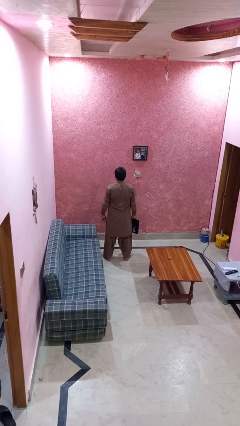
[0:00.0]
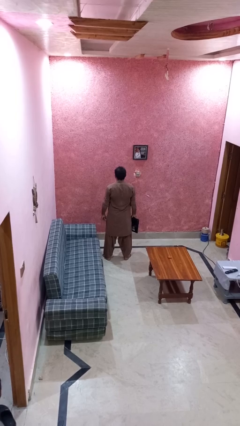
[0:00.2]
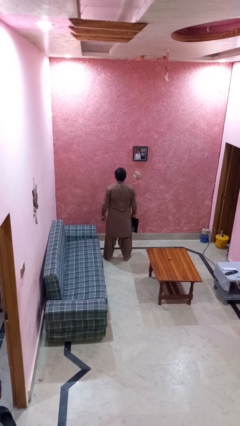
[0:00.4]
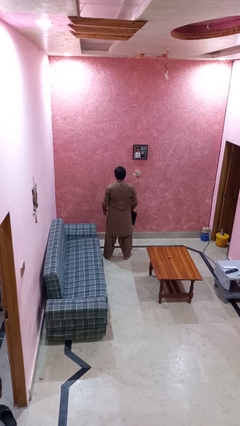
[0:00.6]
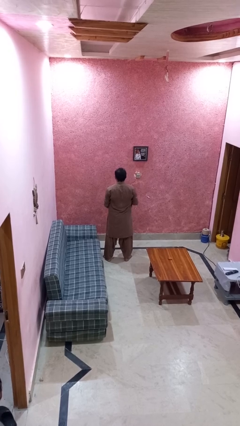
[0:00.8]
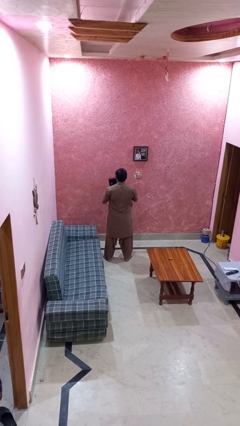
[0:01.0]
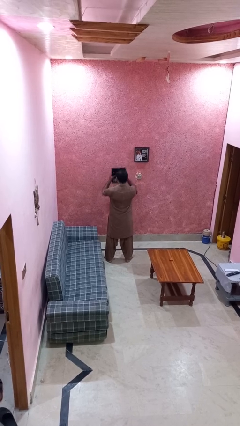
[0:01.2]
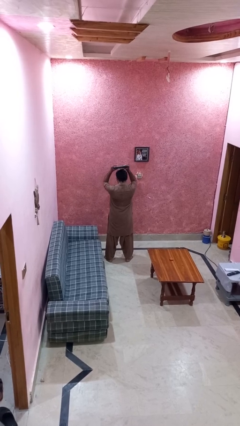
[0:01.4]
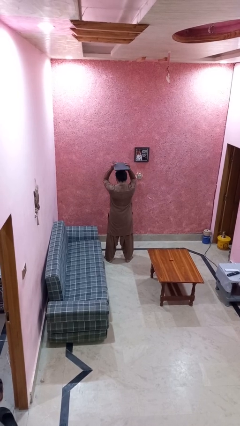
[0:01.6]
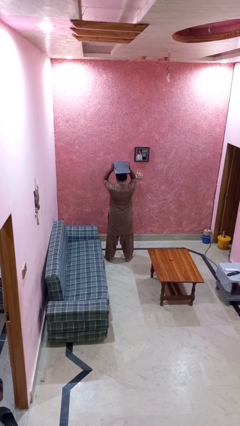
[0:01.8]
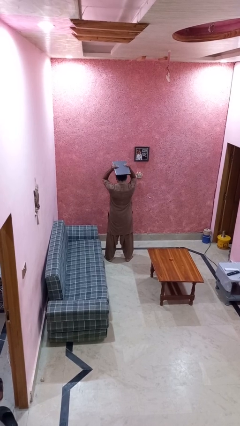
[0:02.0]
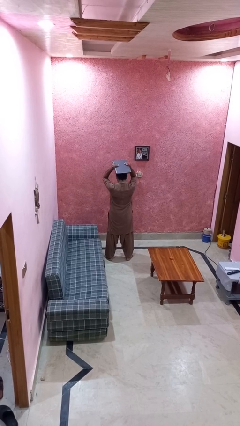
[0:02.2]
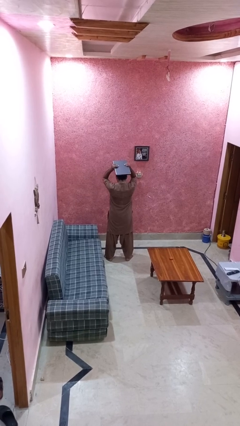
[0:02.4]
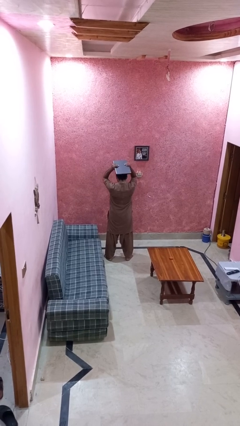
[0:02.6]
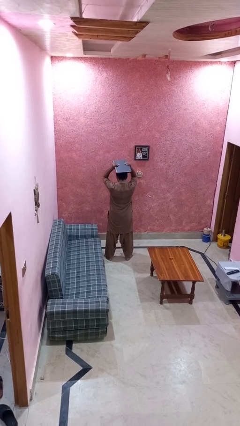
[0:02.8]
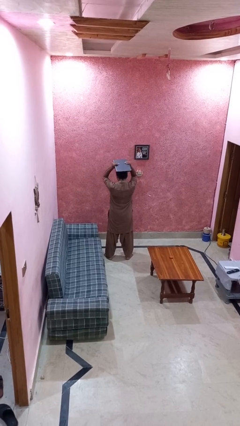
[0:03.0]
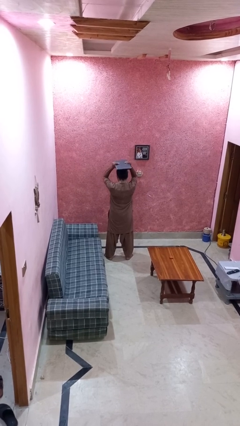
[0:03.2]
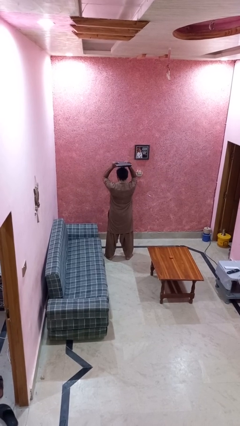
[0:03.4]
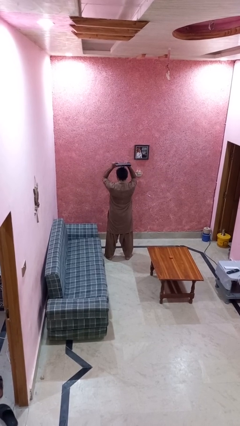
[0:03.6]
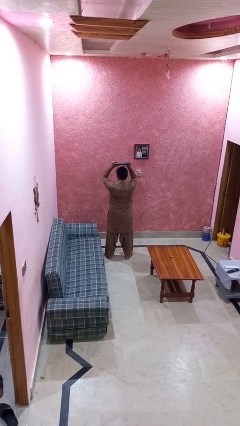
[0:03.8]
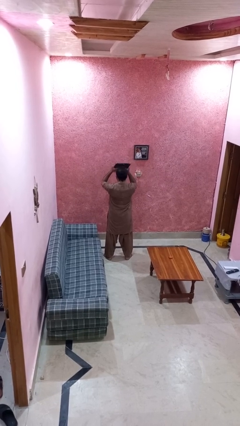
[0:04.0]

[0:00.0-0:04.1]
person holds object above head

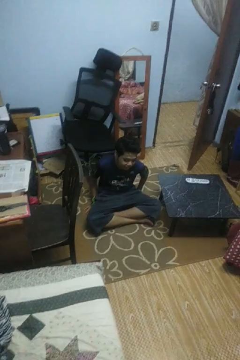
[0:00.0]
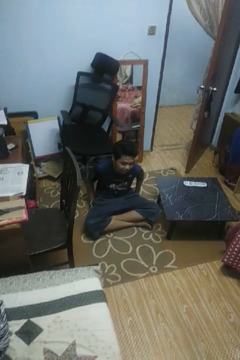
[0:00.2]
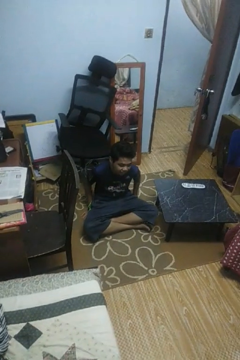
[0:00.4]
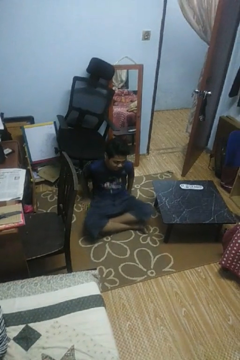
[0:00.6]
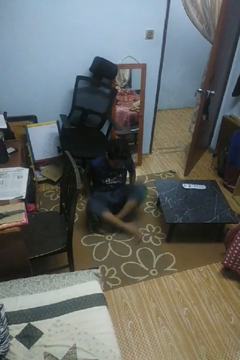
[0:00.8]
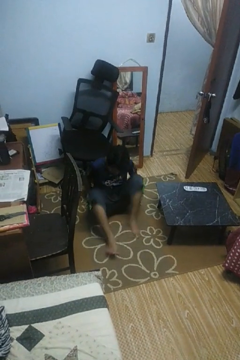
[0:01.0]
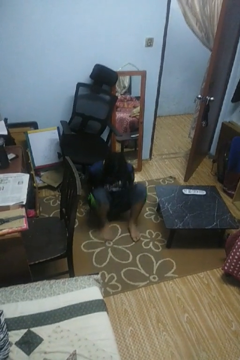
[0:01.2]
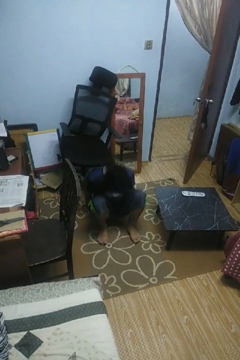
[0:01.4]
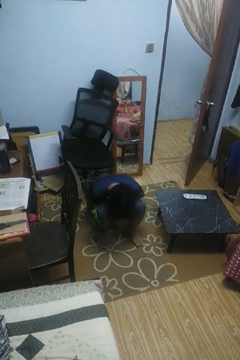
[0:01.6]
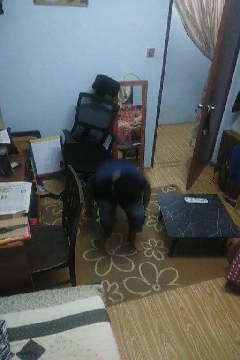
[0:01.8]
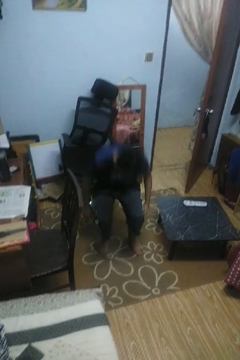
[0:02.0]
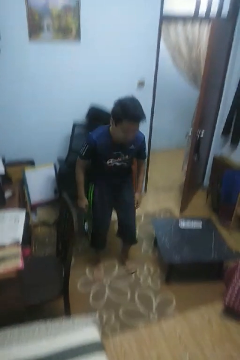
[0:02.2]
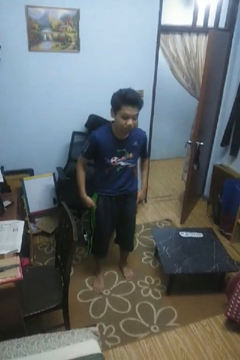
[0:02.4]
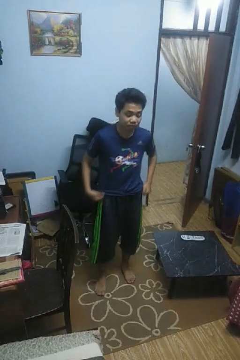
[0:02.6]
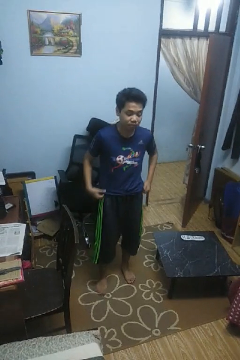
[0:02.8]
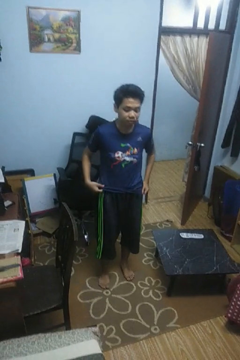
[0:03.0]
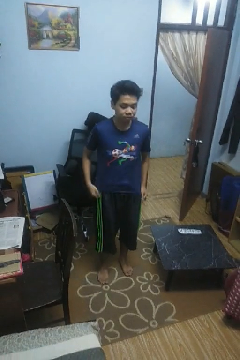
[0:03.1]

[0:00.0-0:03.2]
person stands up from floor

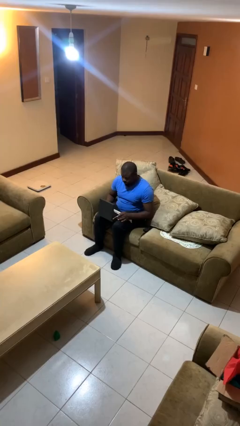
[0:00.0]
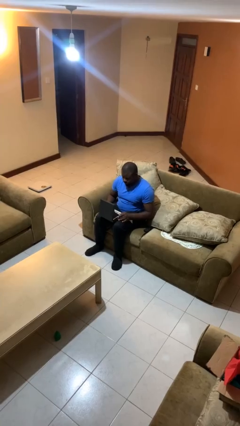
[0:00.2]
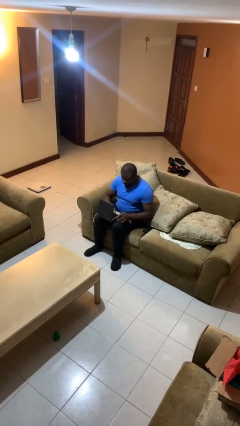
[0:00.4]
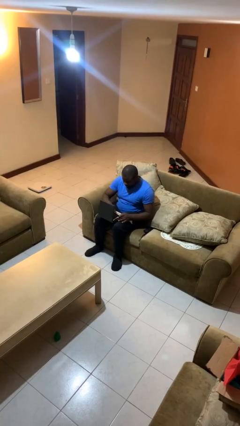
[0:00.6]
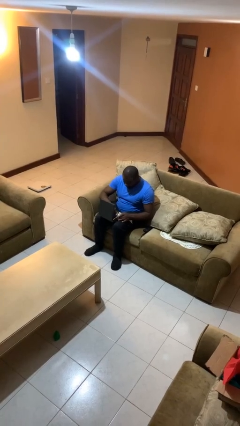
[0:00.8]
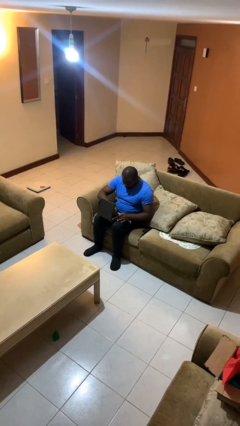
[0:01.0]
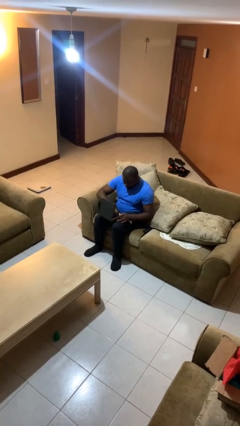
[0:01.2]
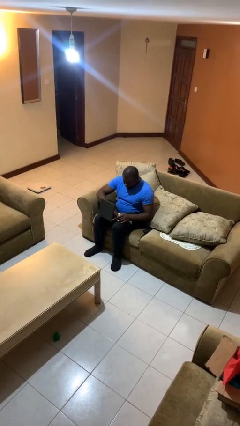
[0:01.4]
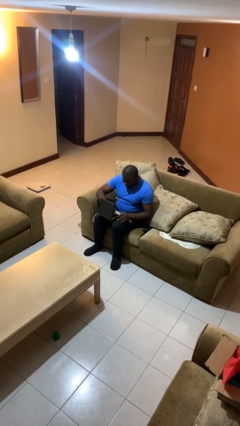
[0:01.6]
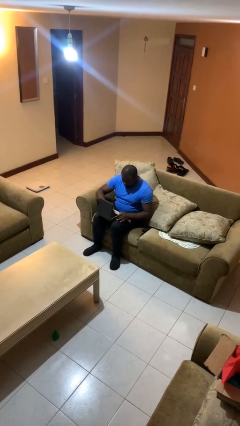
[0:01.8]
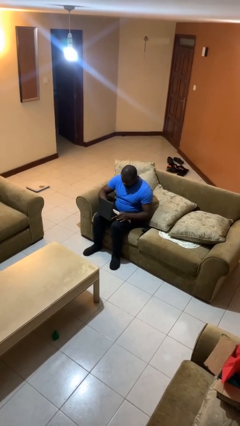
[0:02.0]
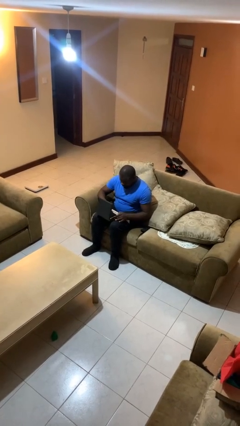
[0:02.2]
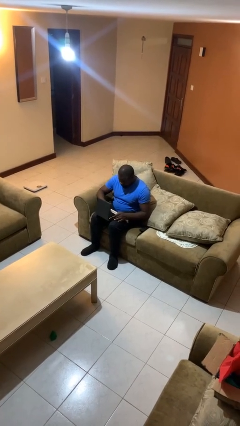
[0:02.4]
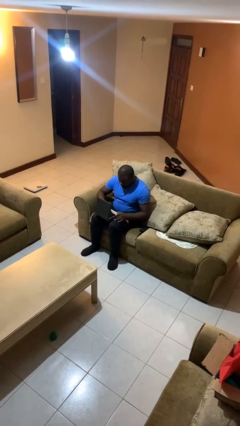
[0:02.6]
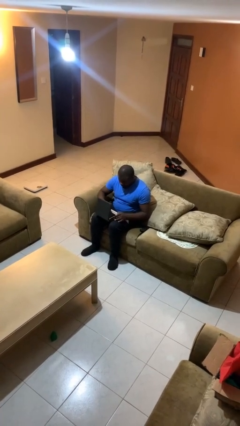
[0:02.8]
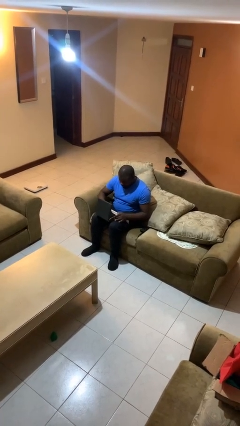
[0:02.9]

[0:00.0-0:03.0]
person searches jewelry box

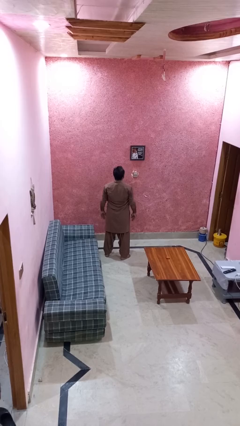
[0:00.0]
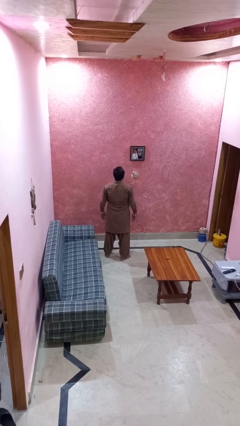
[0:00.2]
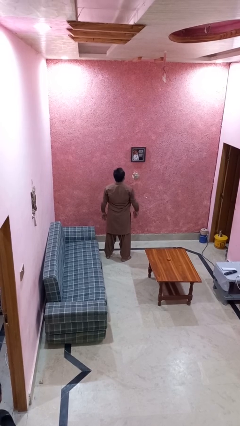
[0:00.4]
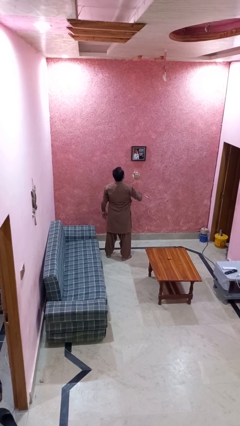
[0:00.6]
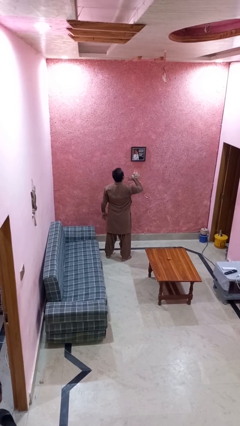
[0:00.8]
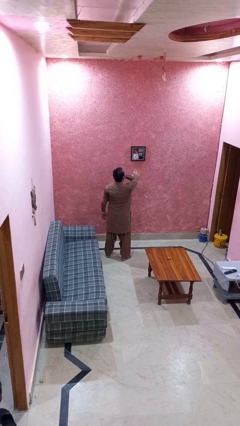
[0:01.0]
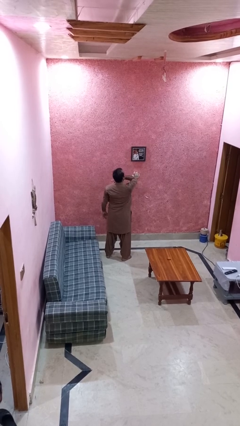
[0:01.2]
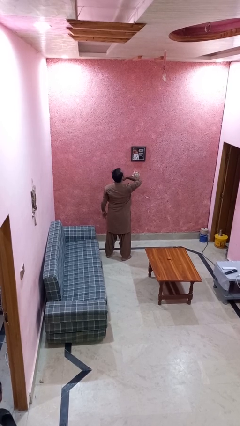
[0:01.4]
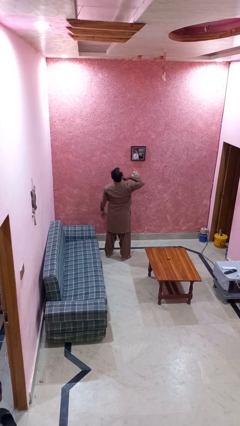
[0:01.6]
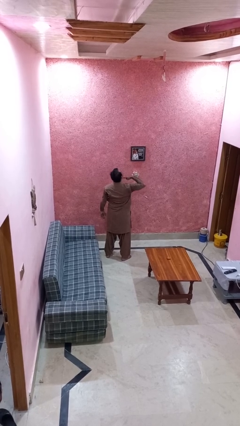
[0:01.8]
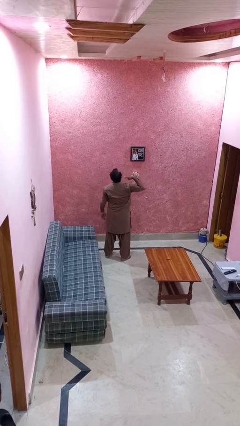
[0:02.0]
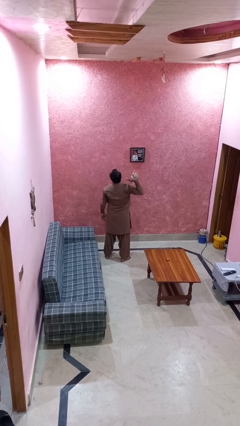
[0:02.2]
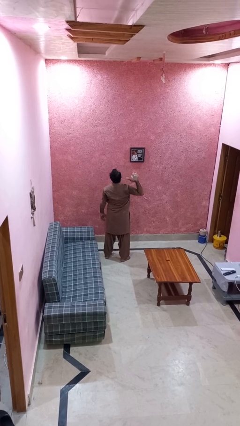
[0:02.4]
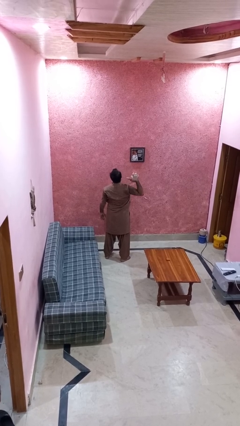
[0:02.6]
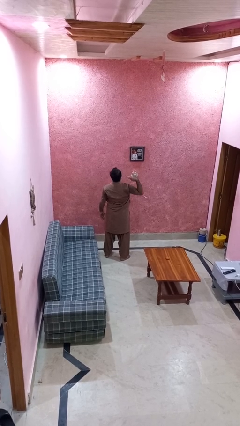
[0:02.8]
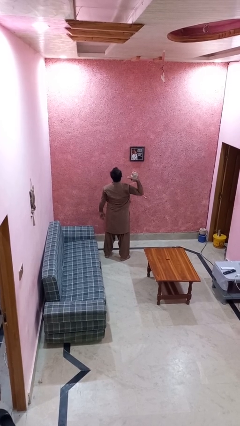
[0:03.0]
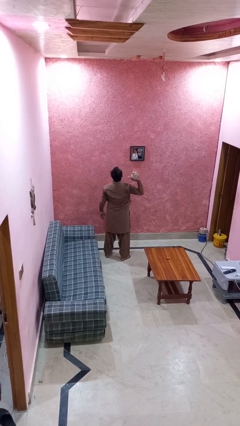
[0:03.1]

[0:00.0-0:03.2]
person gestures cut

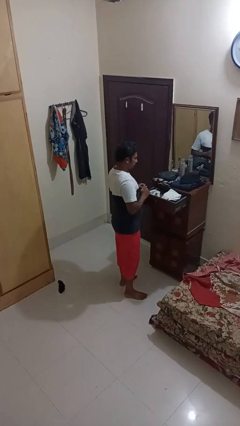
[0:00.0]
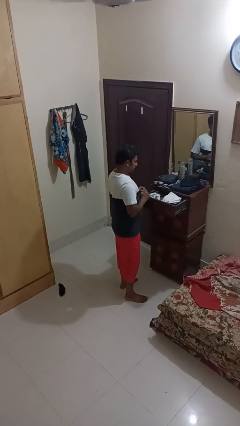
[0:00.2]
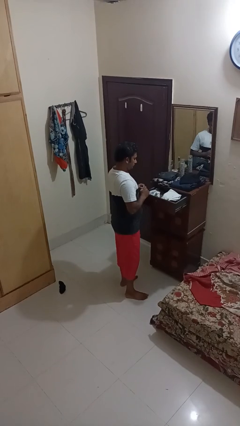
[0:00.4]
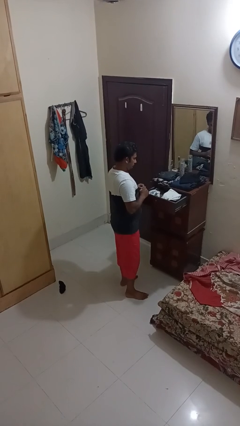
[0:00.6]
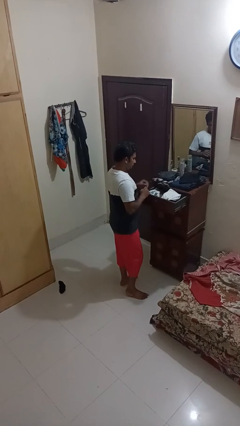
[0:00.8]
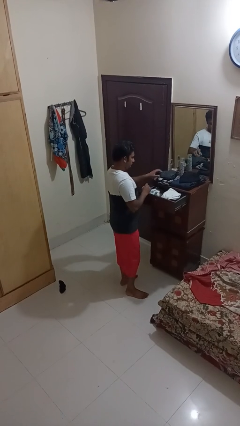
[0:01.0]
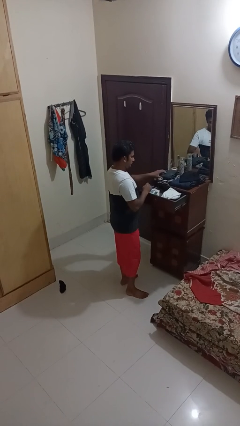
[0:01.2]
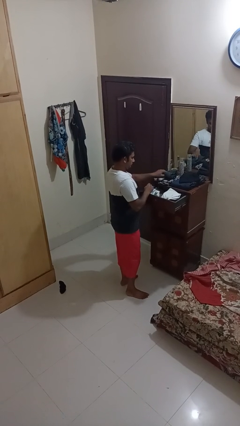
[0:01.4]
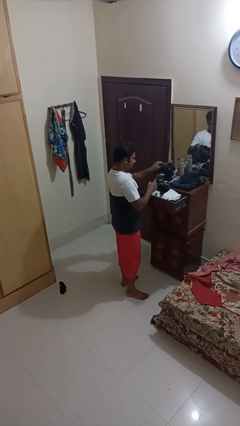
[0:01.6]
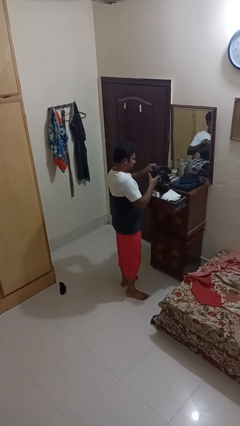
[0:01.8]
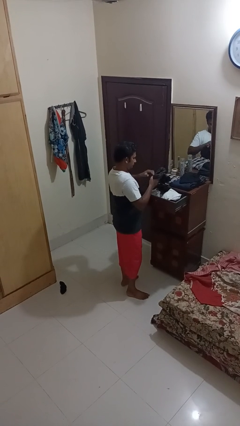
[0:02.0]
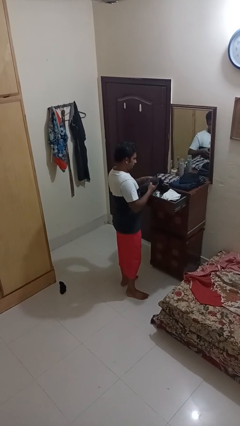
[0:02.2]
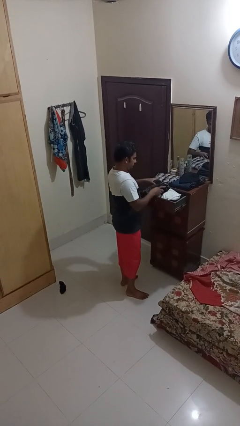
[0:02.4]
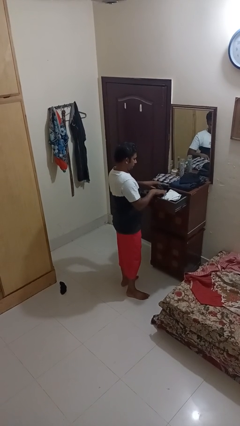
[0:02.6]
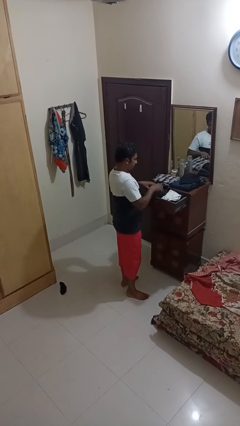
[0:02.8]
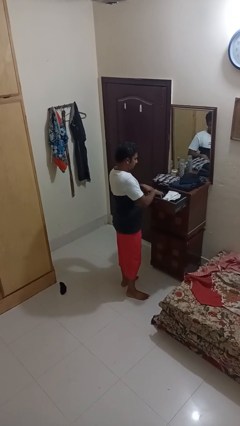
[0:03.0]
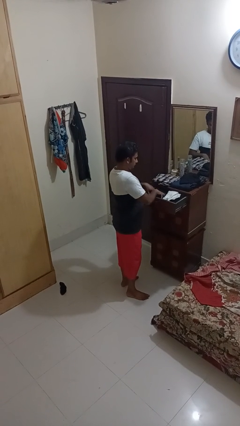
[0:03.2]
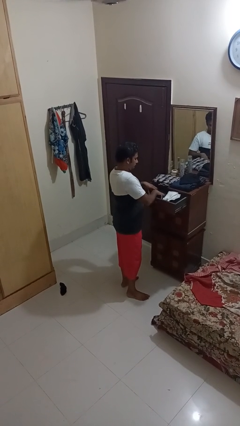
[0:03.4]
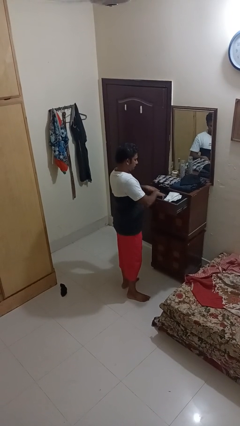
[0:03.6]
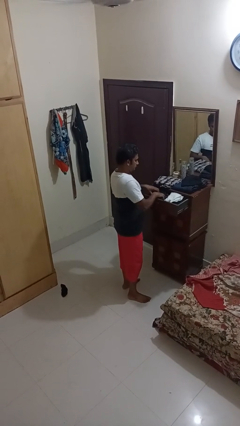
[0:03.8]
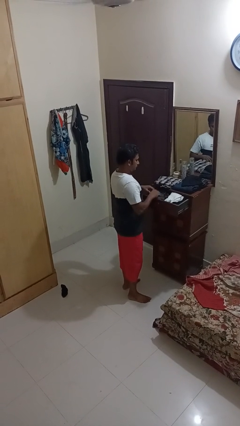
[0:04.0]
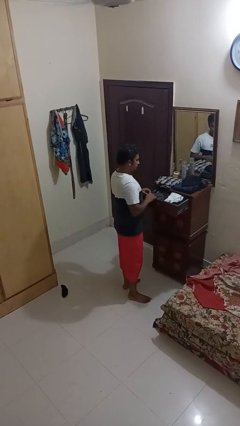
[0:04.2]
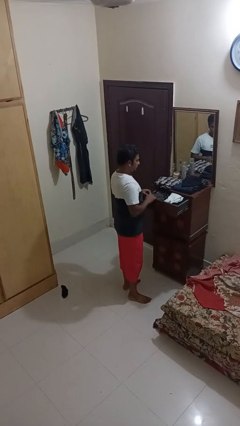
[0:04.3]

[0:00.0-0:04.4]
person puts clothes into dresser

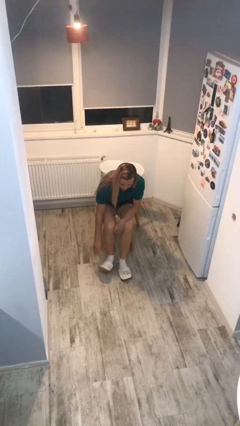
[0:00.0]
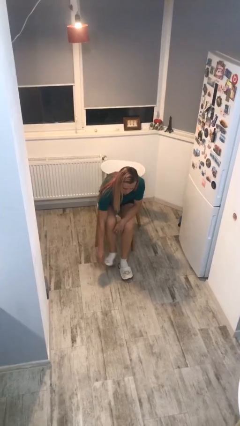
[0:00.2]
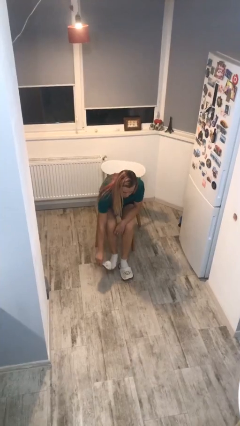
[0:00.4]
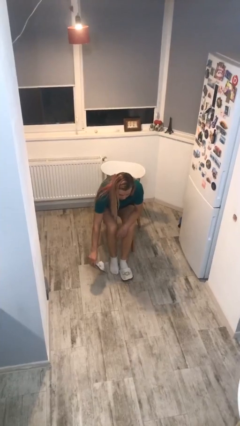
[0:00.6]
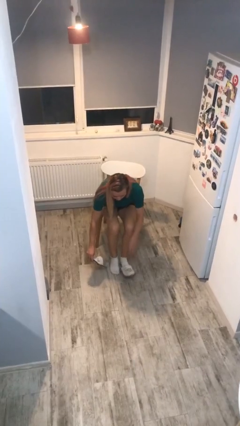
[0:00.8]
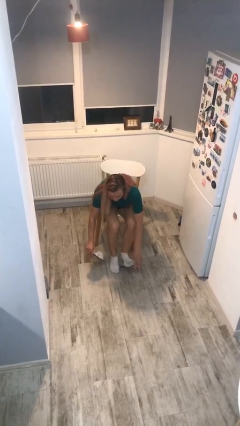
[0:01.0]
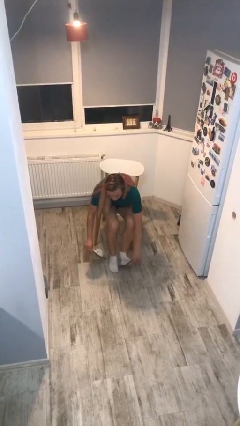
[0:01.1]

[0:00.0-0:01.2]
person takes off shoes
